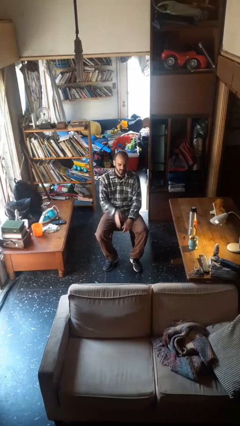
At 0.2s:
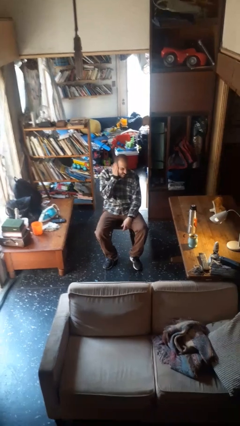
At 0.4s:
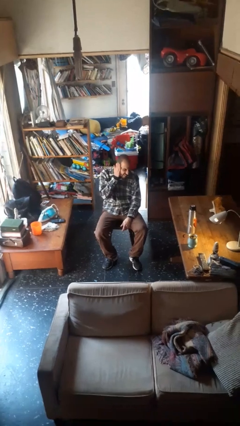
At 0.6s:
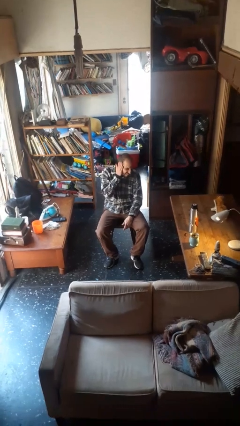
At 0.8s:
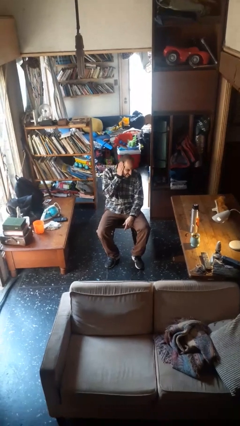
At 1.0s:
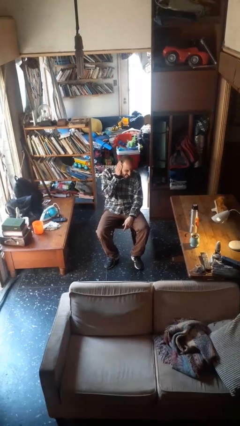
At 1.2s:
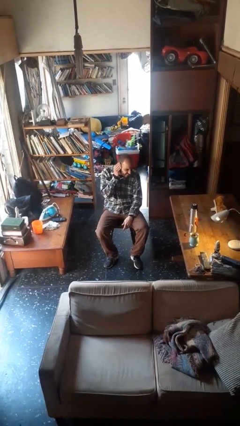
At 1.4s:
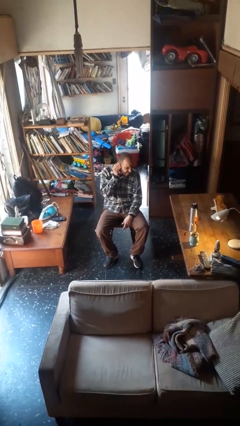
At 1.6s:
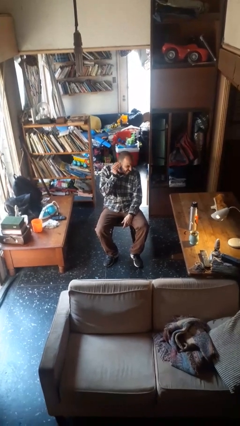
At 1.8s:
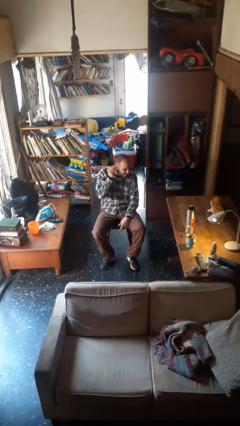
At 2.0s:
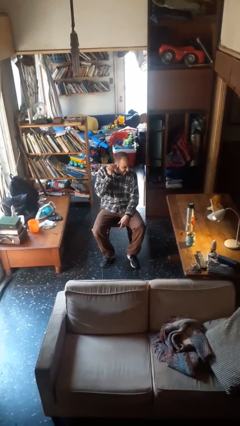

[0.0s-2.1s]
person swats bug

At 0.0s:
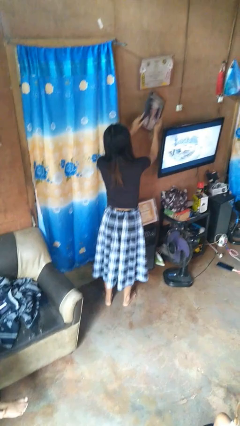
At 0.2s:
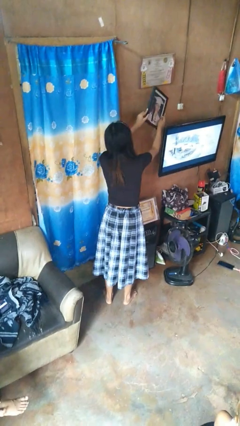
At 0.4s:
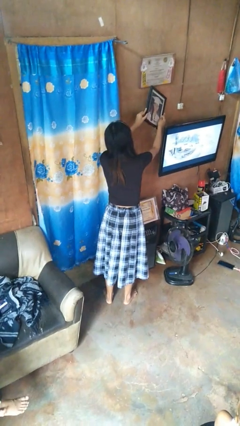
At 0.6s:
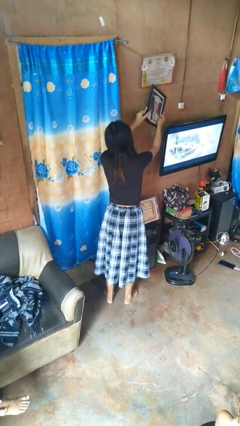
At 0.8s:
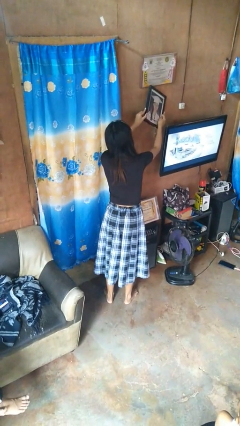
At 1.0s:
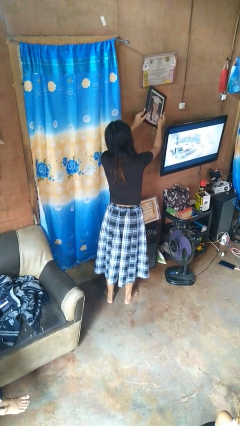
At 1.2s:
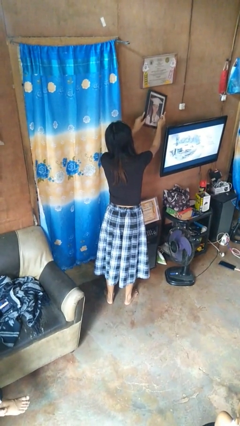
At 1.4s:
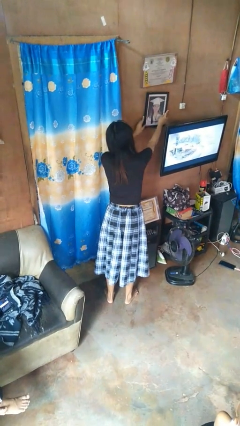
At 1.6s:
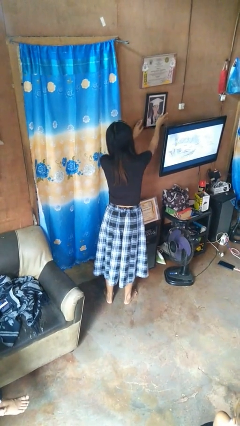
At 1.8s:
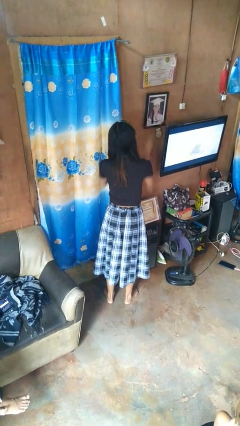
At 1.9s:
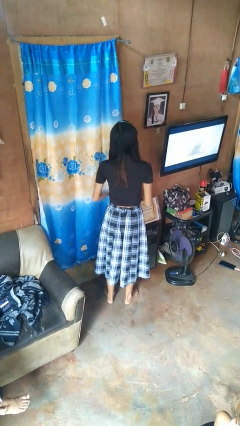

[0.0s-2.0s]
person puts up picture frame

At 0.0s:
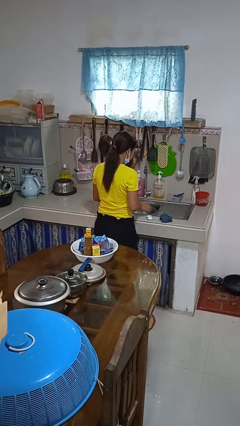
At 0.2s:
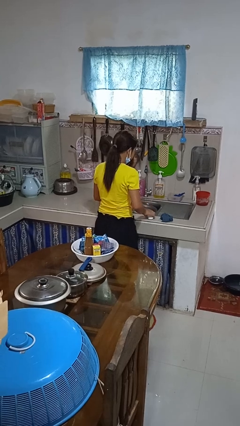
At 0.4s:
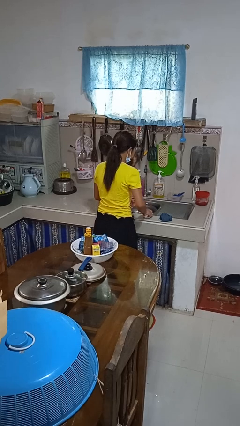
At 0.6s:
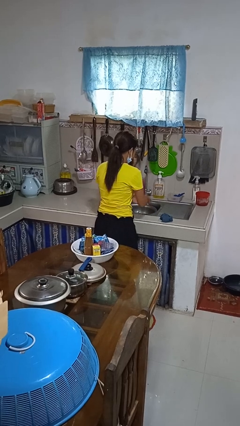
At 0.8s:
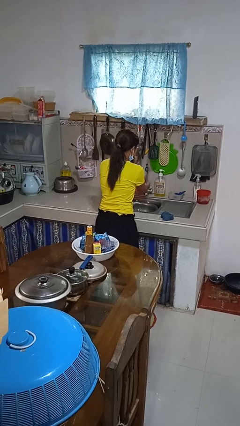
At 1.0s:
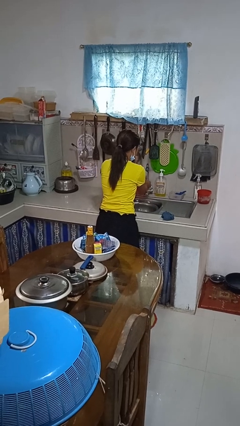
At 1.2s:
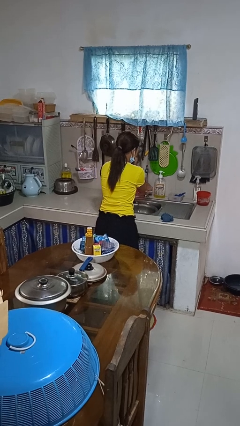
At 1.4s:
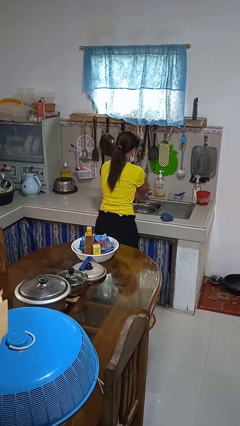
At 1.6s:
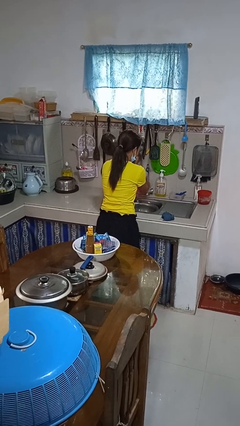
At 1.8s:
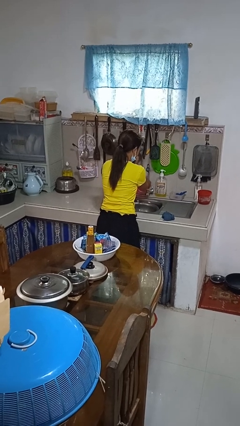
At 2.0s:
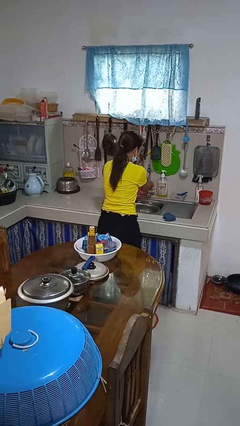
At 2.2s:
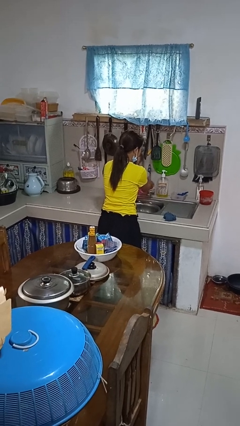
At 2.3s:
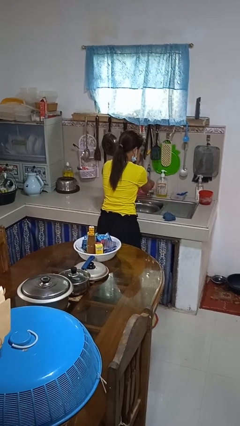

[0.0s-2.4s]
person washes hands

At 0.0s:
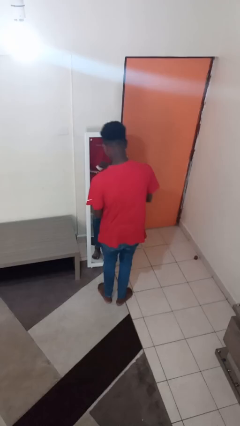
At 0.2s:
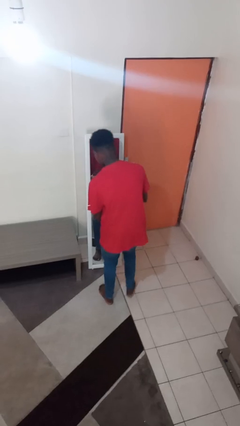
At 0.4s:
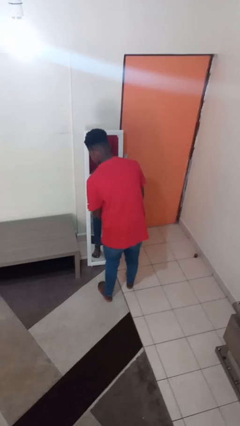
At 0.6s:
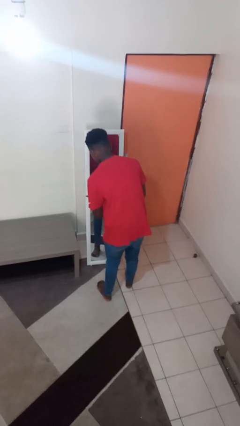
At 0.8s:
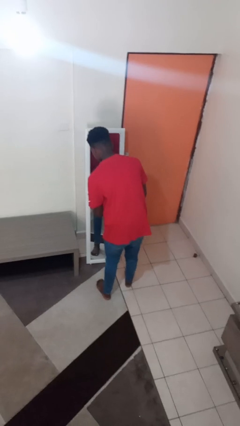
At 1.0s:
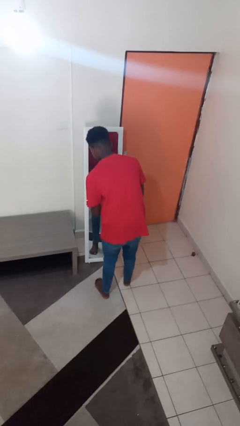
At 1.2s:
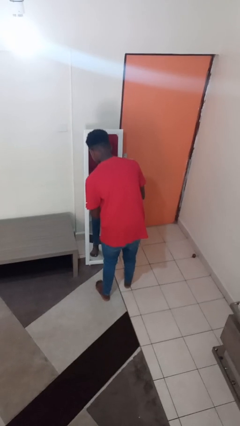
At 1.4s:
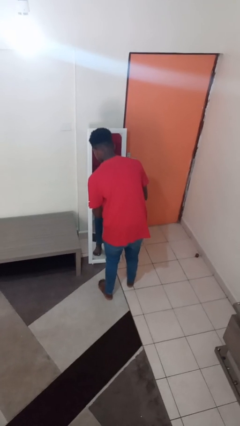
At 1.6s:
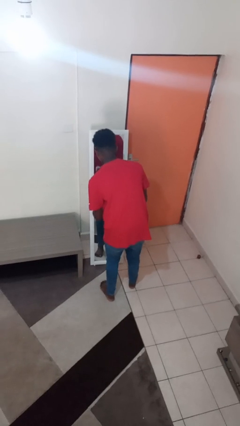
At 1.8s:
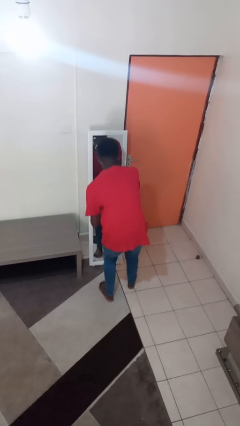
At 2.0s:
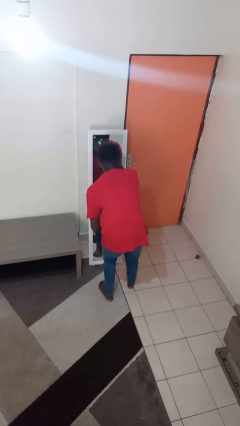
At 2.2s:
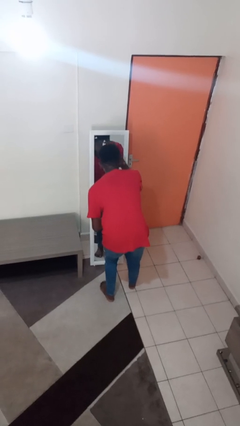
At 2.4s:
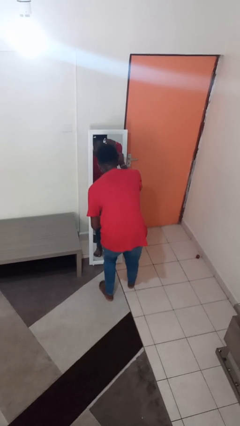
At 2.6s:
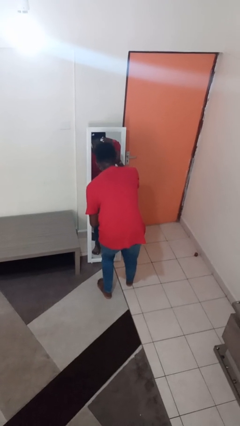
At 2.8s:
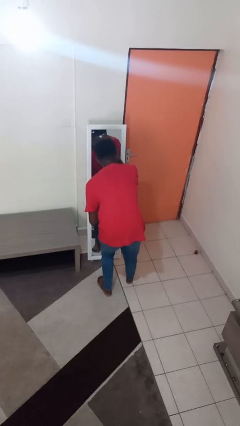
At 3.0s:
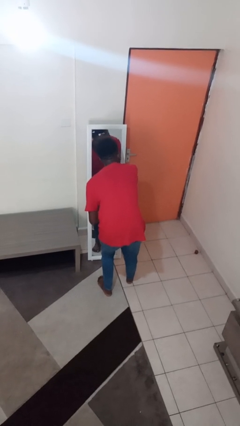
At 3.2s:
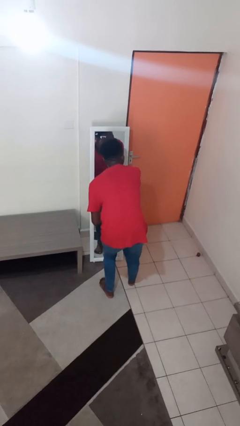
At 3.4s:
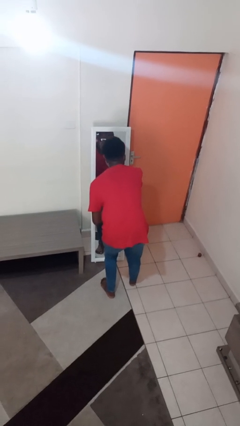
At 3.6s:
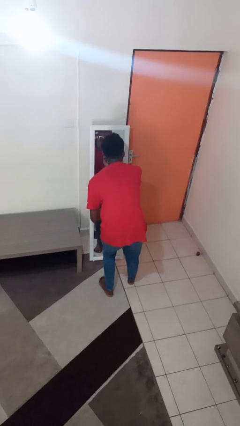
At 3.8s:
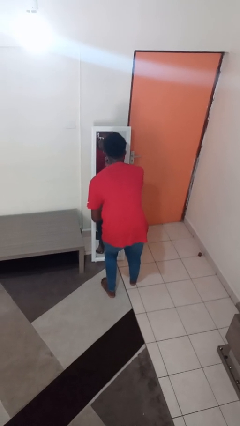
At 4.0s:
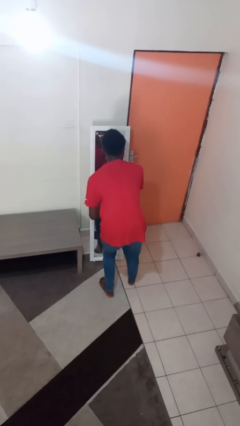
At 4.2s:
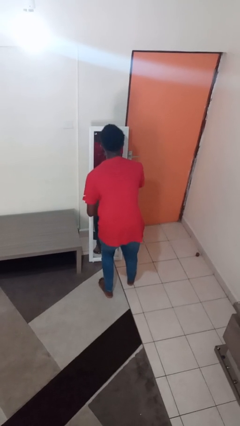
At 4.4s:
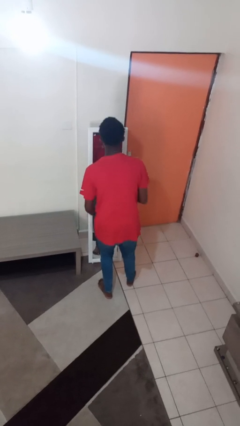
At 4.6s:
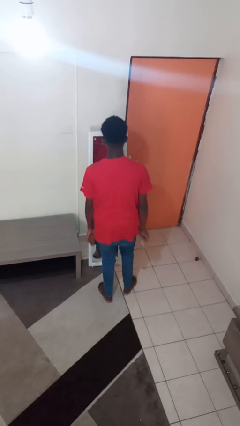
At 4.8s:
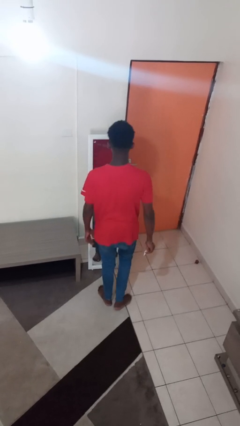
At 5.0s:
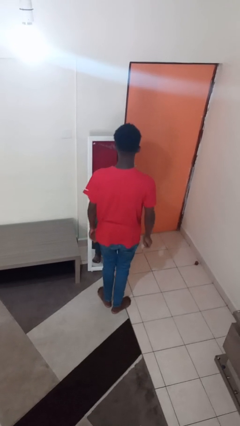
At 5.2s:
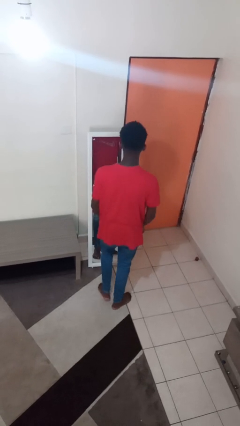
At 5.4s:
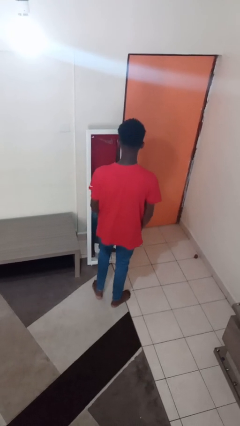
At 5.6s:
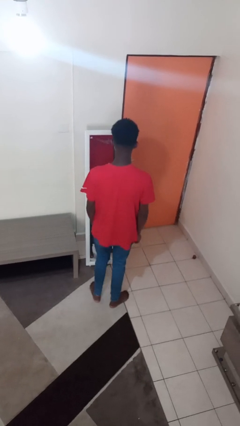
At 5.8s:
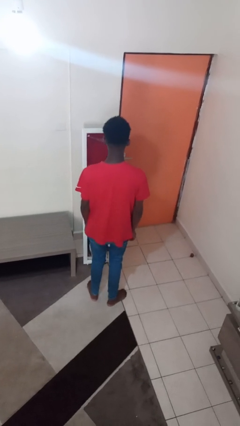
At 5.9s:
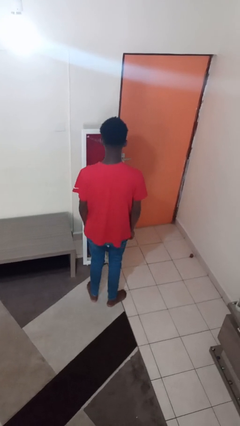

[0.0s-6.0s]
person applies foundation makeup

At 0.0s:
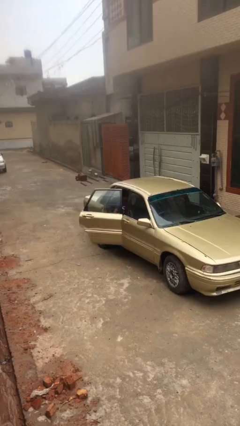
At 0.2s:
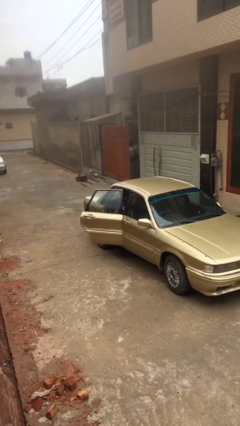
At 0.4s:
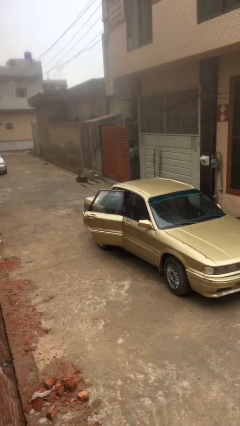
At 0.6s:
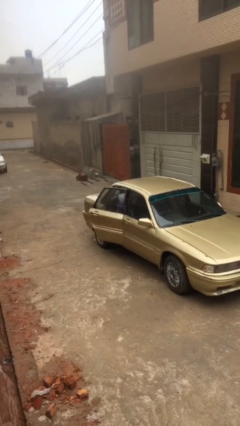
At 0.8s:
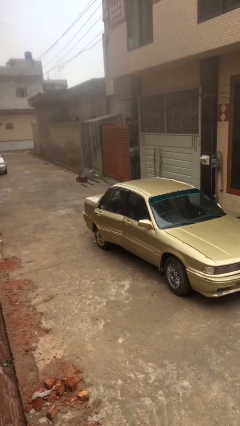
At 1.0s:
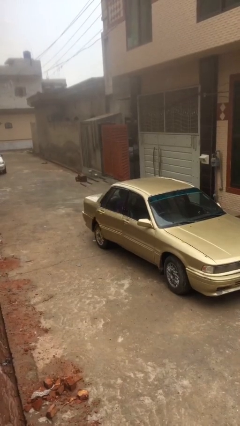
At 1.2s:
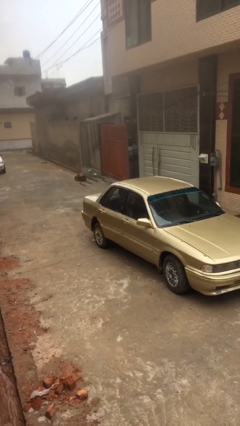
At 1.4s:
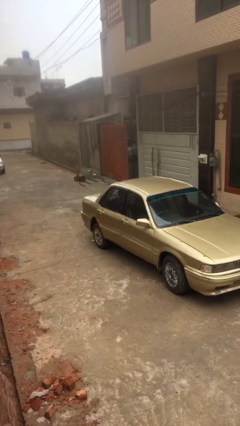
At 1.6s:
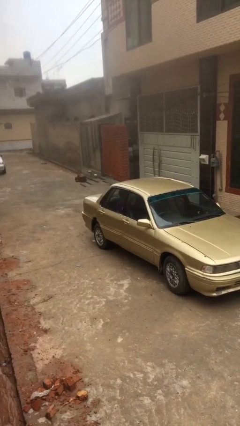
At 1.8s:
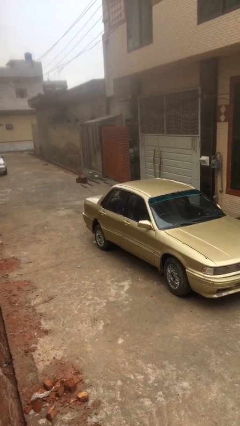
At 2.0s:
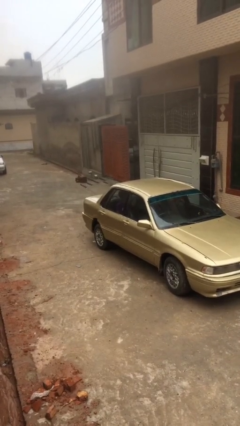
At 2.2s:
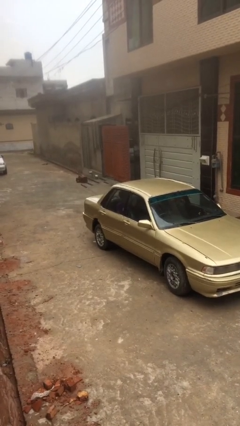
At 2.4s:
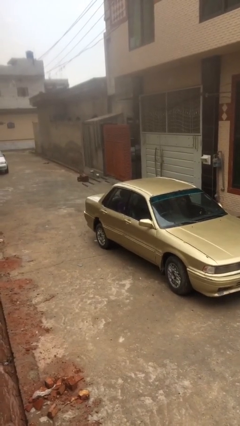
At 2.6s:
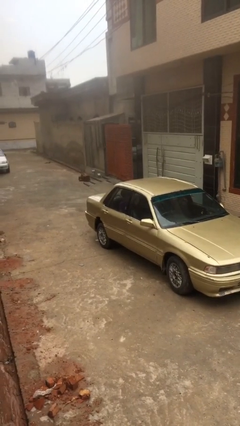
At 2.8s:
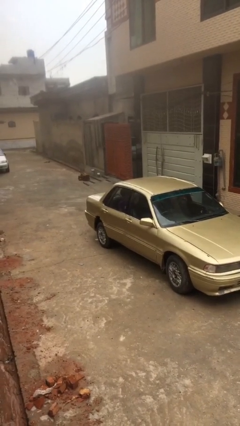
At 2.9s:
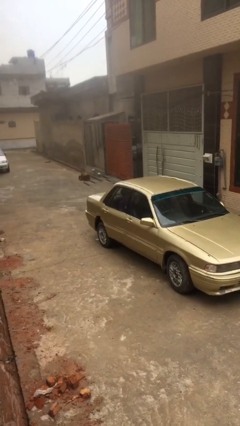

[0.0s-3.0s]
person closes car door

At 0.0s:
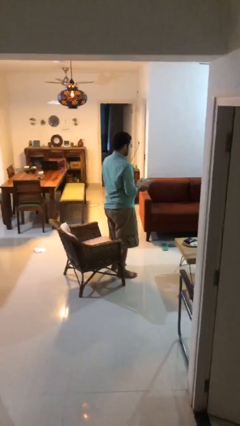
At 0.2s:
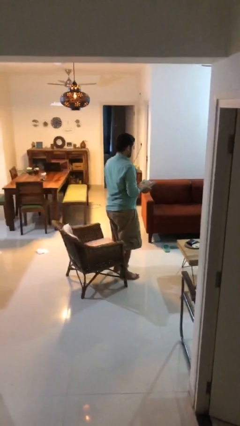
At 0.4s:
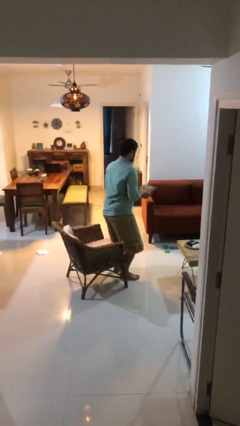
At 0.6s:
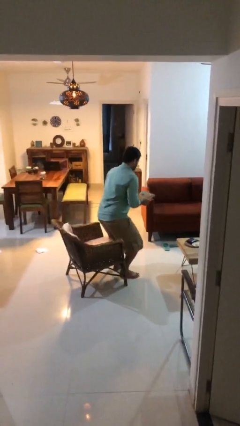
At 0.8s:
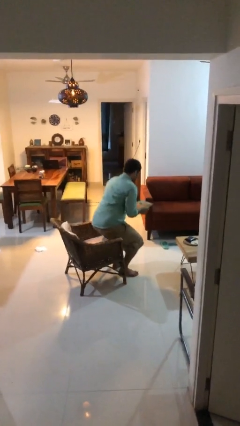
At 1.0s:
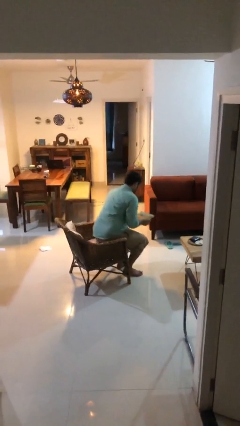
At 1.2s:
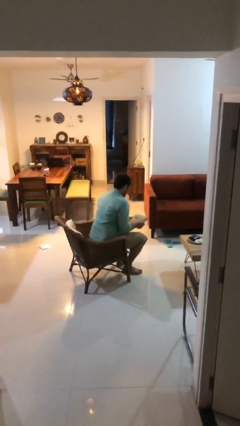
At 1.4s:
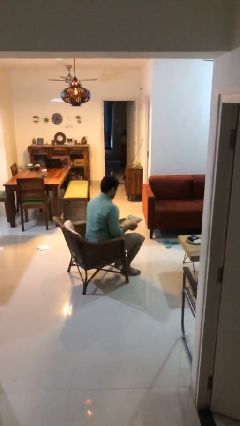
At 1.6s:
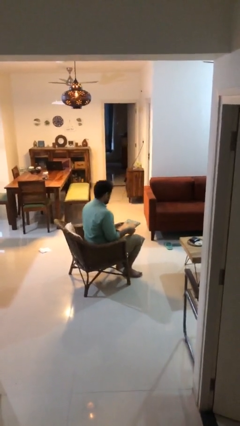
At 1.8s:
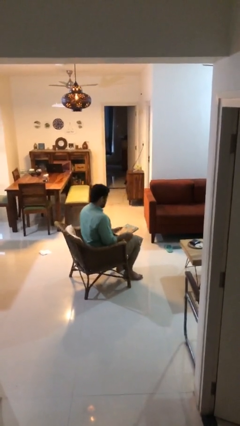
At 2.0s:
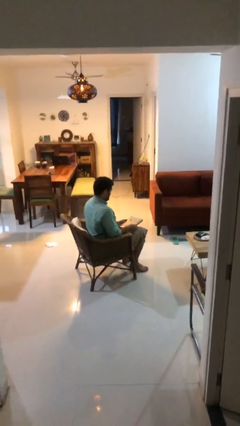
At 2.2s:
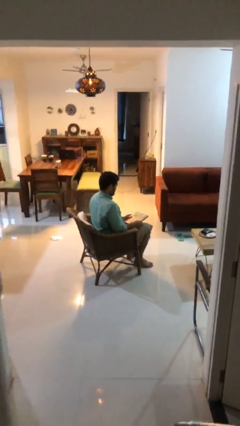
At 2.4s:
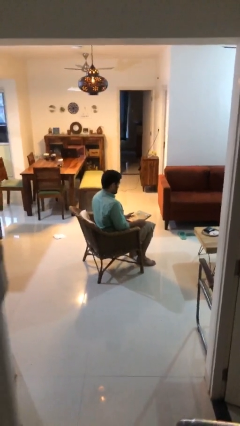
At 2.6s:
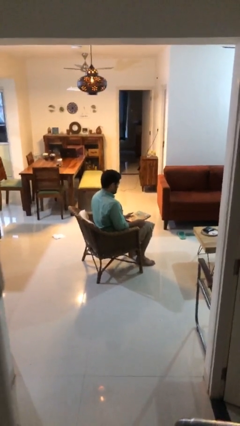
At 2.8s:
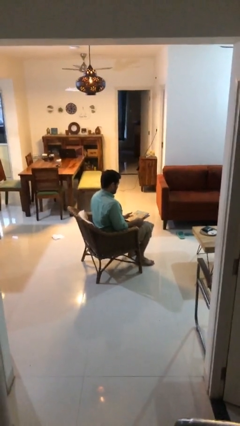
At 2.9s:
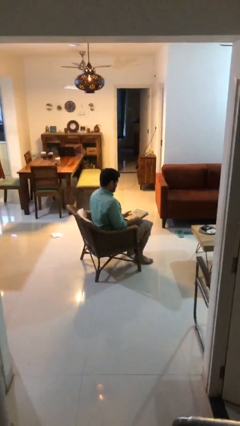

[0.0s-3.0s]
person sits down
